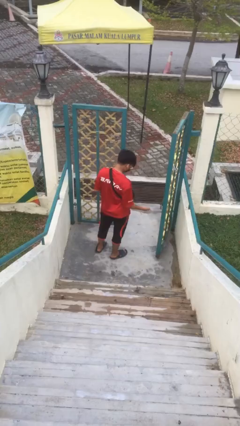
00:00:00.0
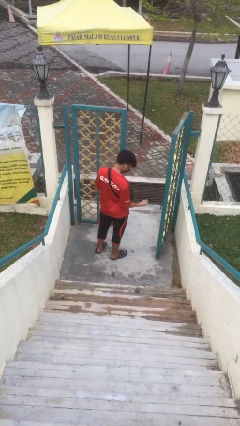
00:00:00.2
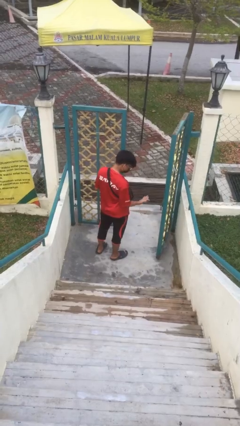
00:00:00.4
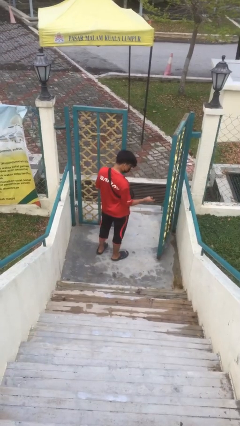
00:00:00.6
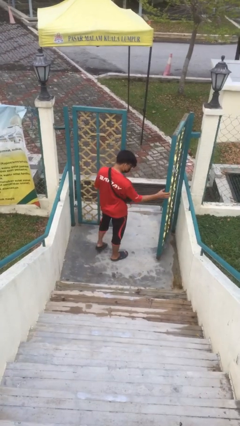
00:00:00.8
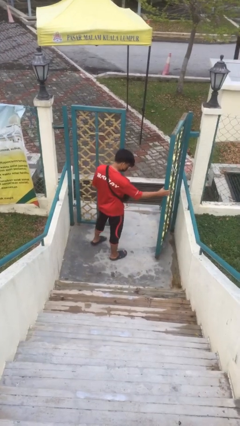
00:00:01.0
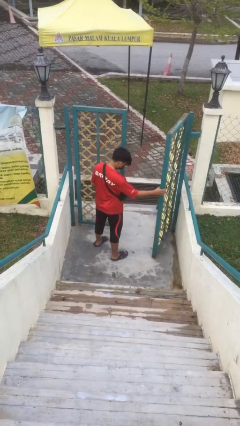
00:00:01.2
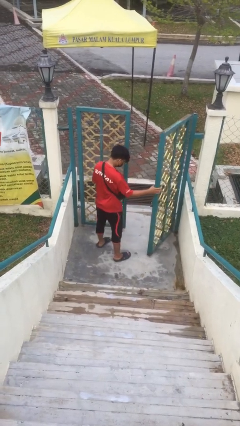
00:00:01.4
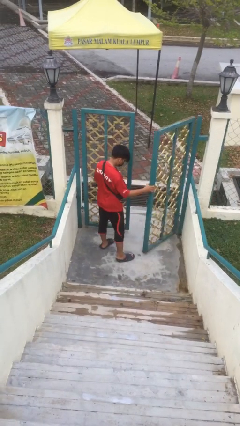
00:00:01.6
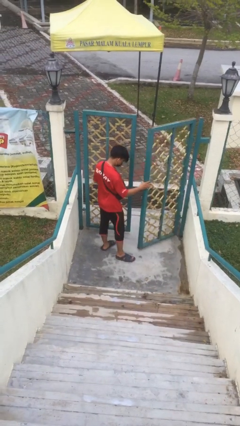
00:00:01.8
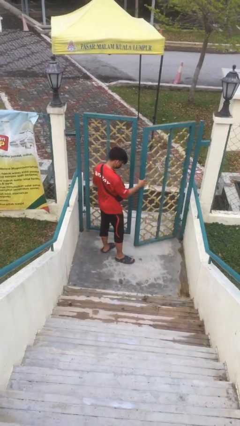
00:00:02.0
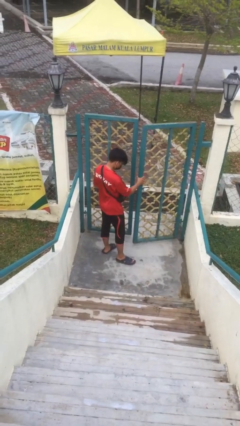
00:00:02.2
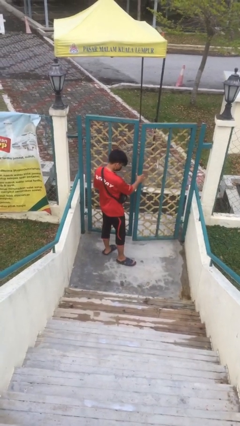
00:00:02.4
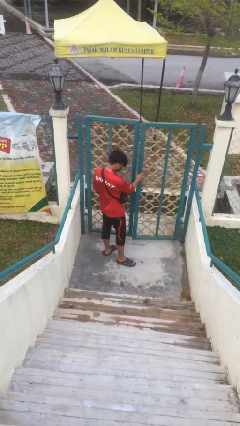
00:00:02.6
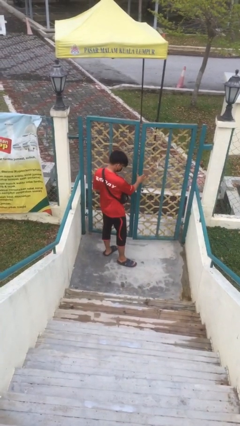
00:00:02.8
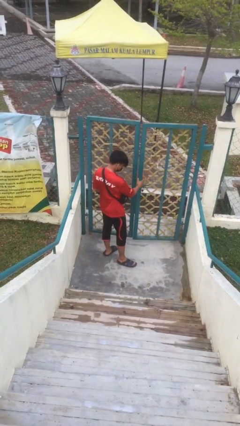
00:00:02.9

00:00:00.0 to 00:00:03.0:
person closes facility door

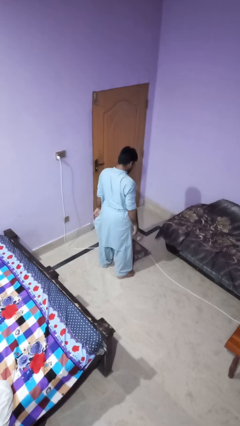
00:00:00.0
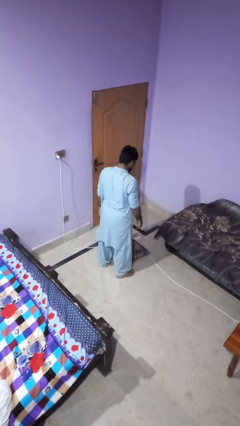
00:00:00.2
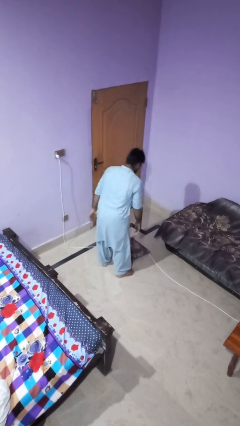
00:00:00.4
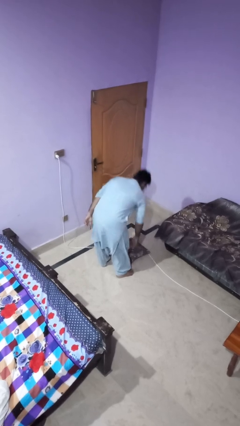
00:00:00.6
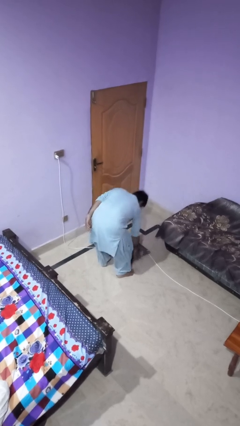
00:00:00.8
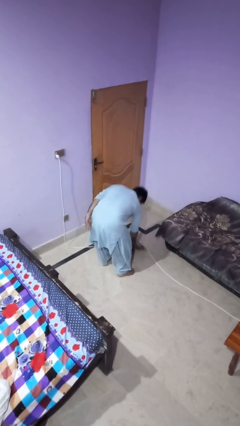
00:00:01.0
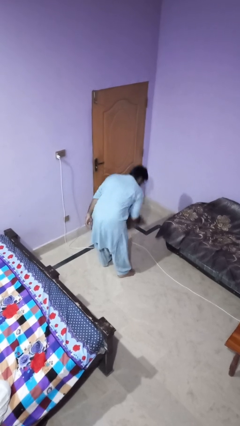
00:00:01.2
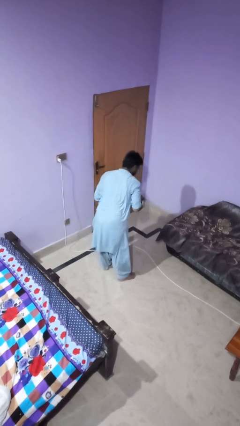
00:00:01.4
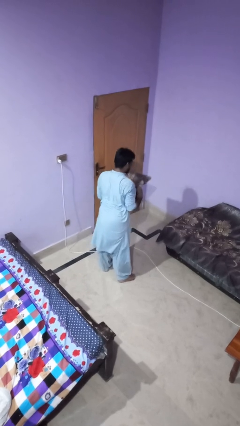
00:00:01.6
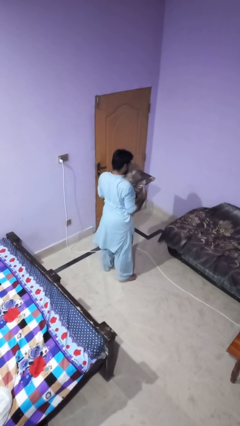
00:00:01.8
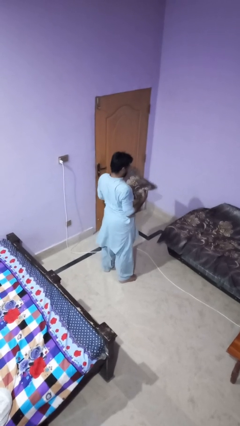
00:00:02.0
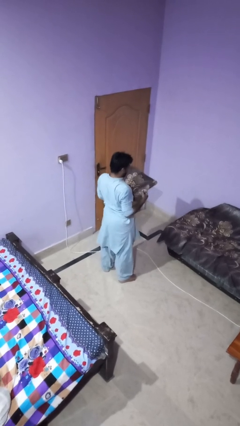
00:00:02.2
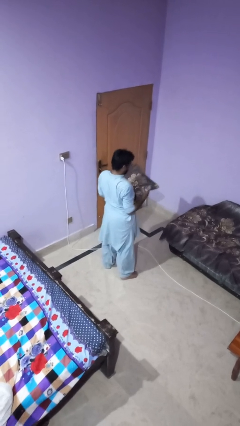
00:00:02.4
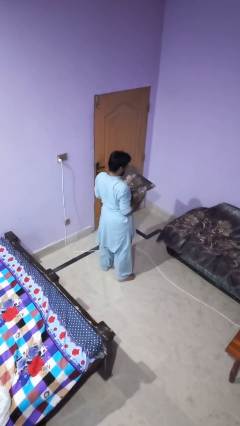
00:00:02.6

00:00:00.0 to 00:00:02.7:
person picks up object from floor

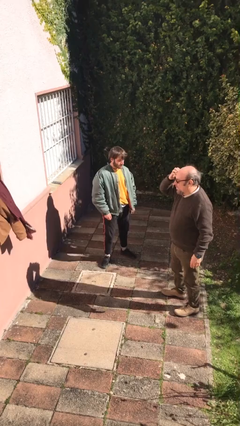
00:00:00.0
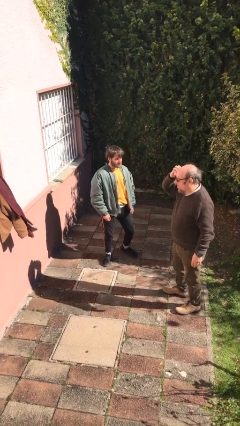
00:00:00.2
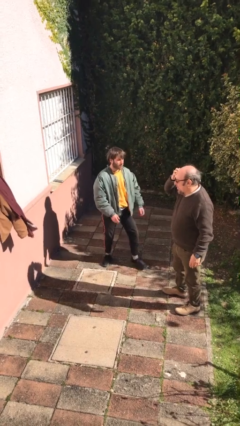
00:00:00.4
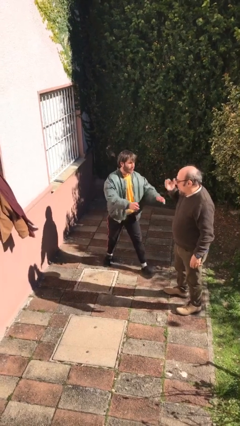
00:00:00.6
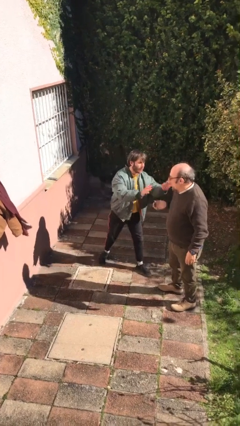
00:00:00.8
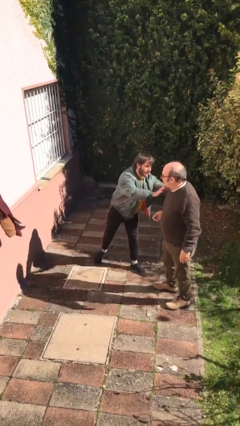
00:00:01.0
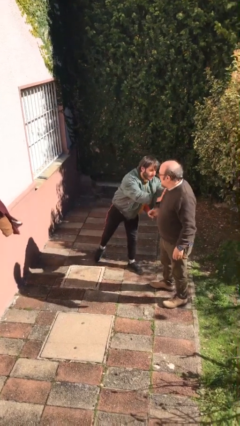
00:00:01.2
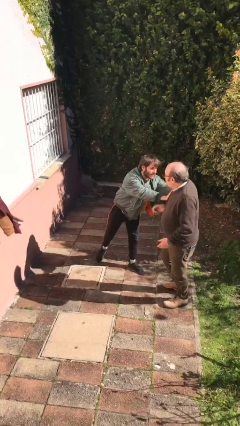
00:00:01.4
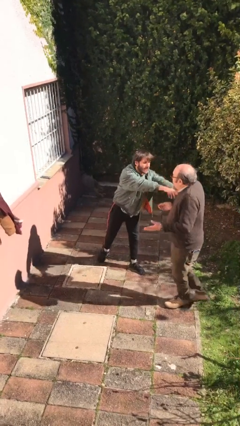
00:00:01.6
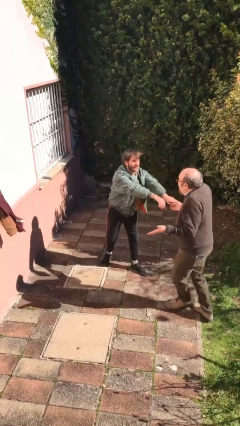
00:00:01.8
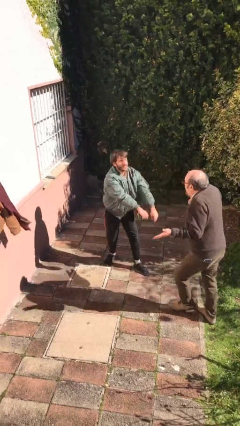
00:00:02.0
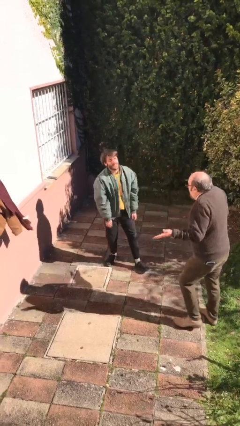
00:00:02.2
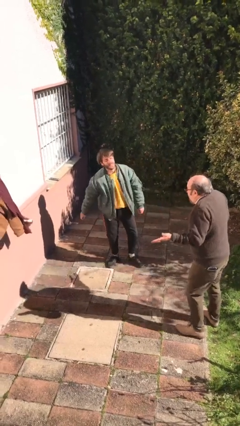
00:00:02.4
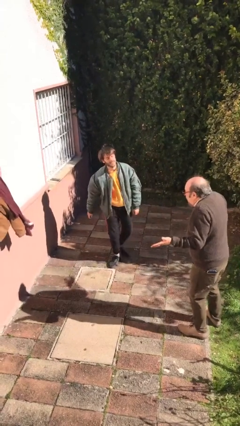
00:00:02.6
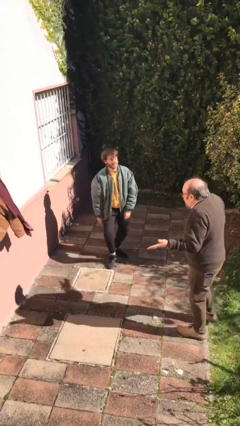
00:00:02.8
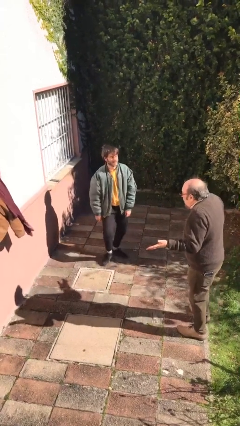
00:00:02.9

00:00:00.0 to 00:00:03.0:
person shoves person

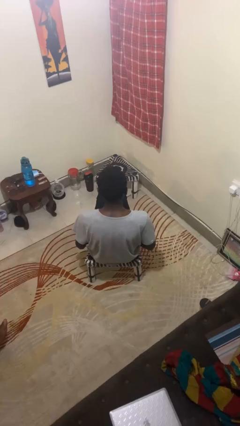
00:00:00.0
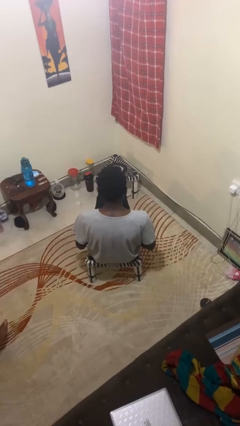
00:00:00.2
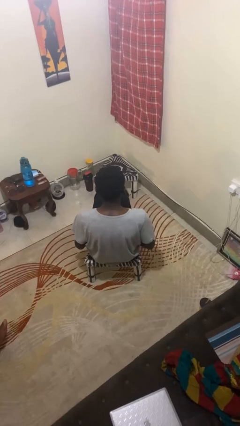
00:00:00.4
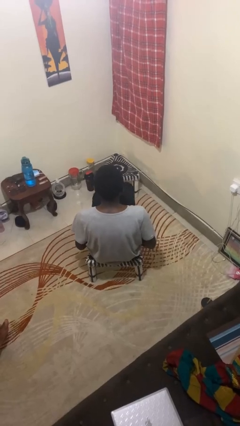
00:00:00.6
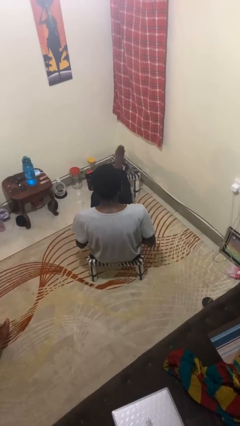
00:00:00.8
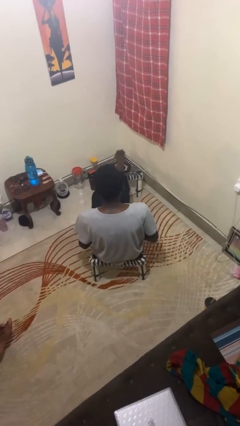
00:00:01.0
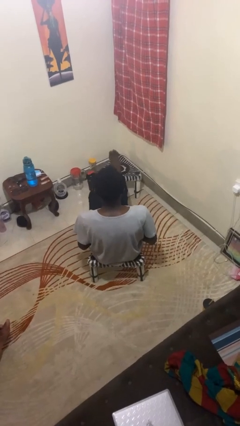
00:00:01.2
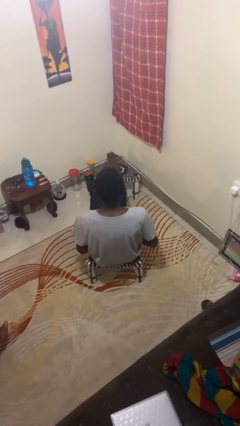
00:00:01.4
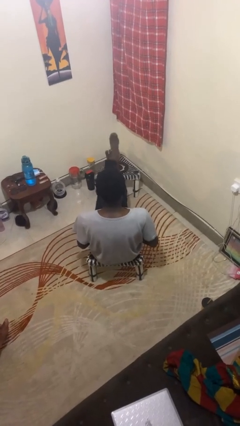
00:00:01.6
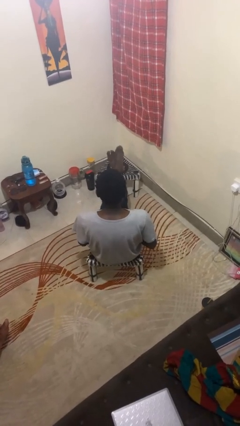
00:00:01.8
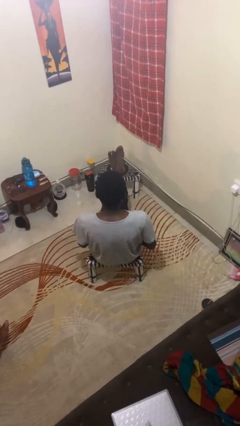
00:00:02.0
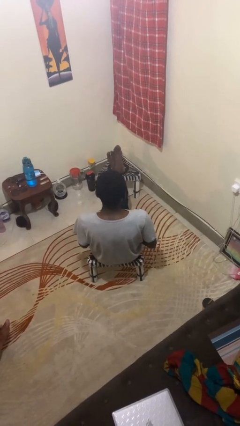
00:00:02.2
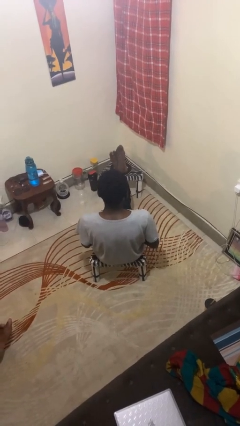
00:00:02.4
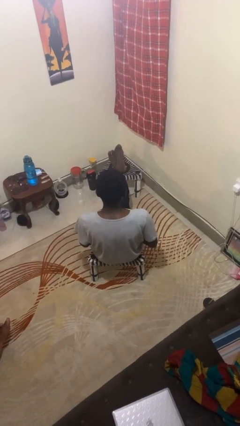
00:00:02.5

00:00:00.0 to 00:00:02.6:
person puts feet up

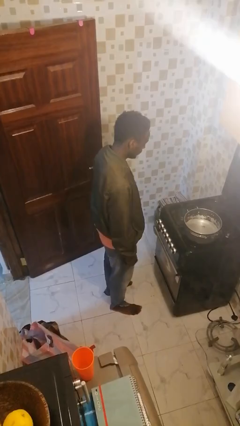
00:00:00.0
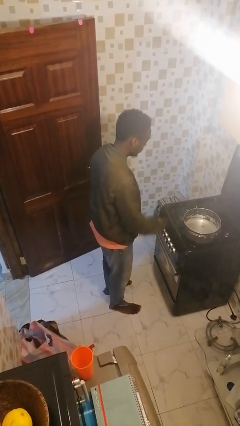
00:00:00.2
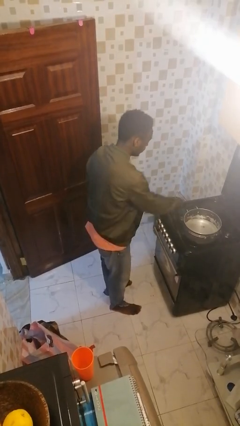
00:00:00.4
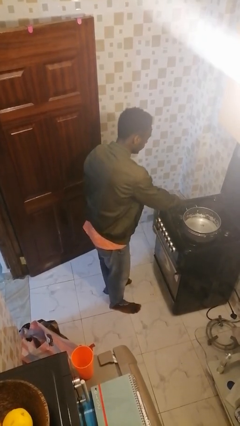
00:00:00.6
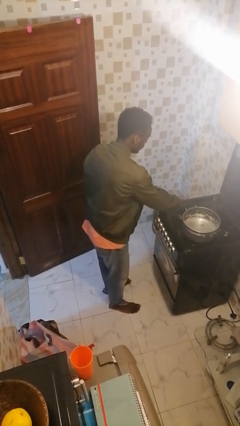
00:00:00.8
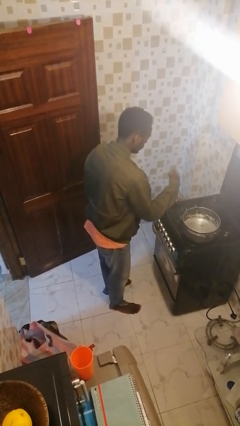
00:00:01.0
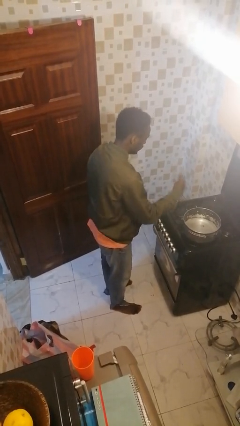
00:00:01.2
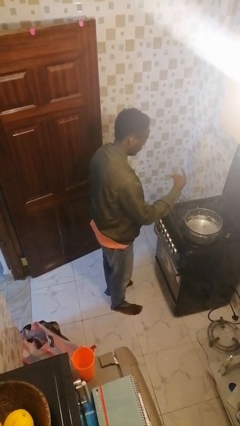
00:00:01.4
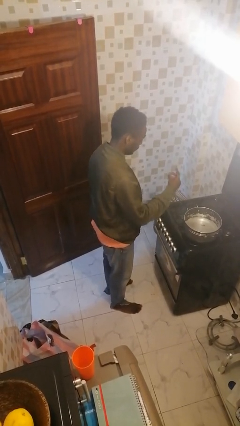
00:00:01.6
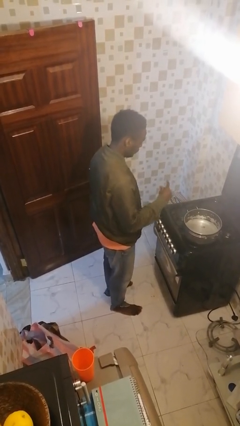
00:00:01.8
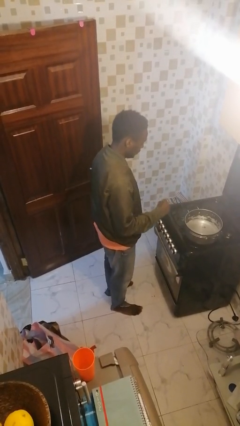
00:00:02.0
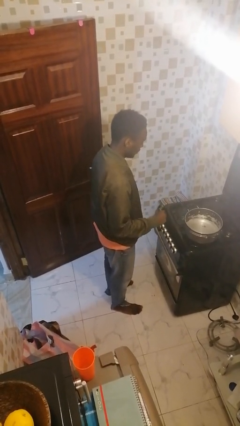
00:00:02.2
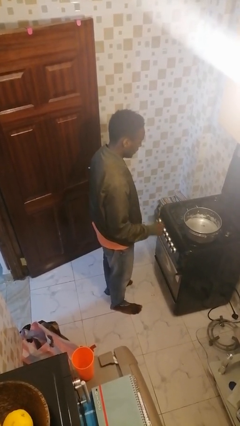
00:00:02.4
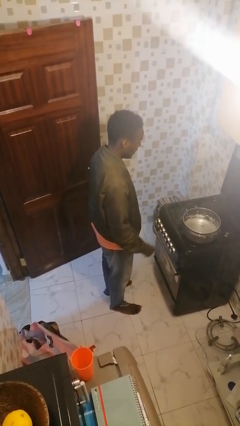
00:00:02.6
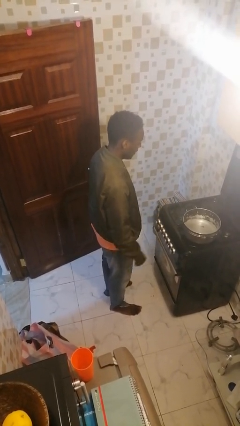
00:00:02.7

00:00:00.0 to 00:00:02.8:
person burns hand

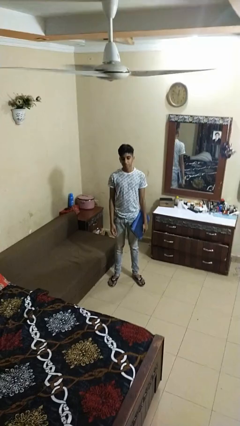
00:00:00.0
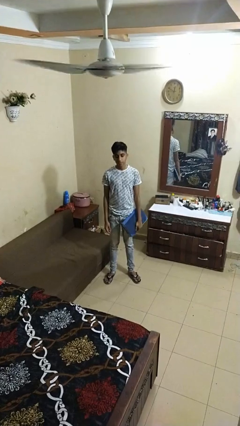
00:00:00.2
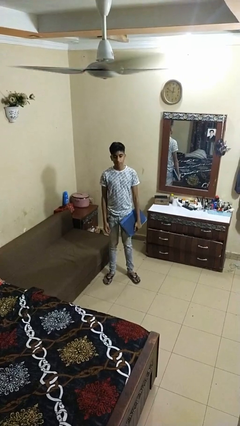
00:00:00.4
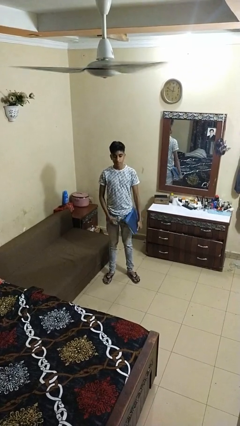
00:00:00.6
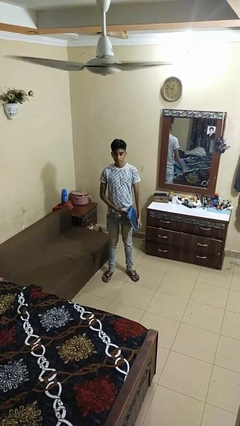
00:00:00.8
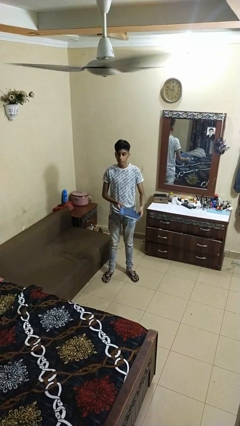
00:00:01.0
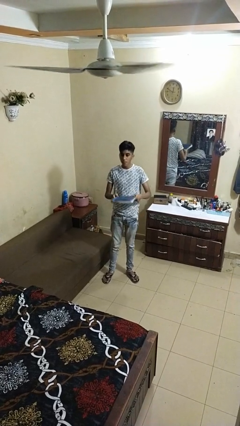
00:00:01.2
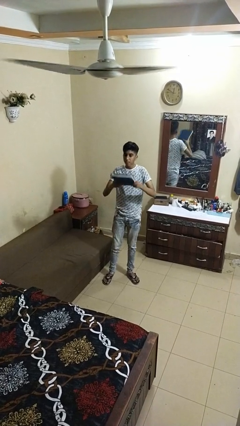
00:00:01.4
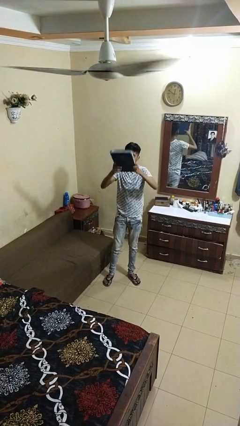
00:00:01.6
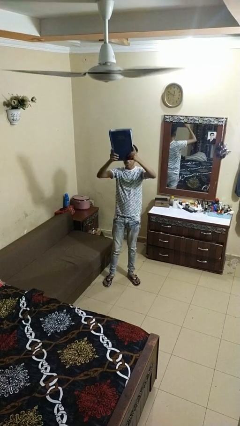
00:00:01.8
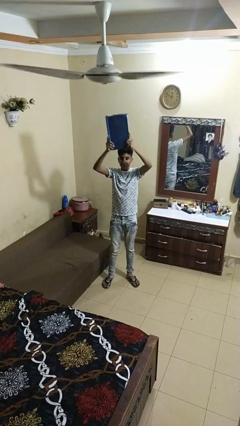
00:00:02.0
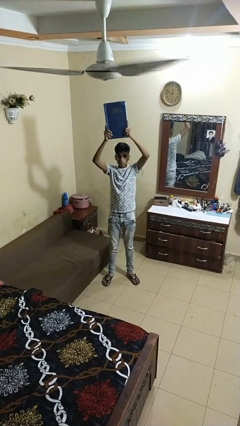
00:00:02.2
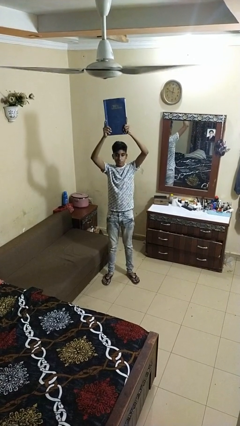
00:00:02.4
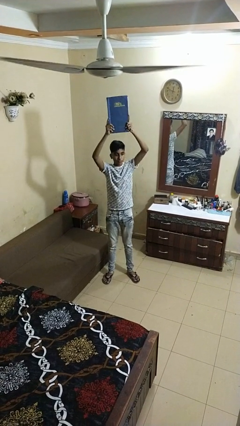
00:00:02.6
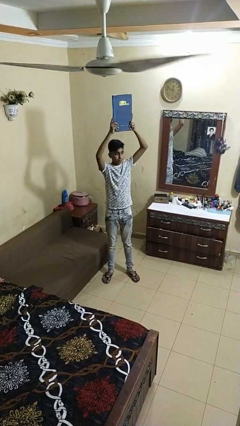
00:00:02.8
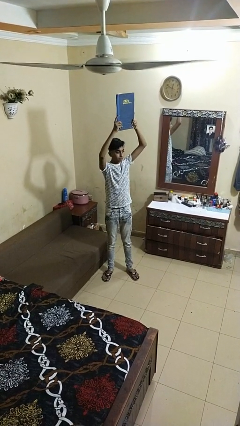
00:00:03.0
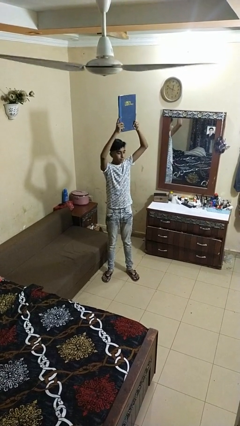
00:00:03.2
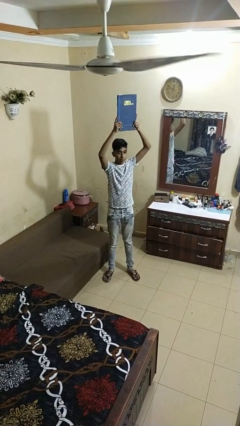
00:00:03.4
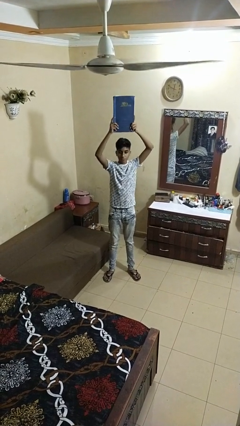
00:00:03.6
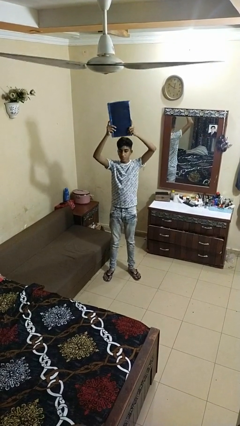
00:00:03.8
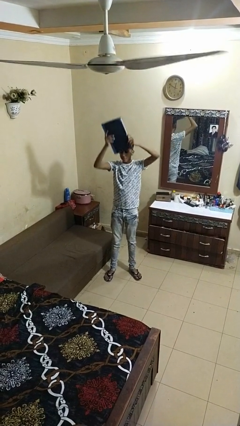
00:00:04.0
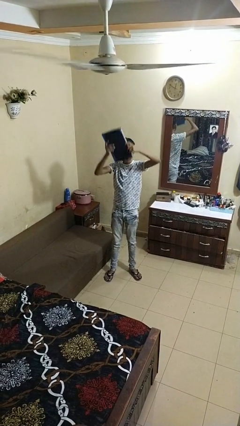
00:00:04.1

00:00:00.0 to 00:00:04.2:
person holds object above head
